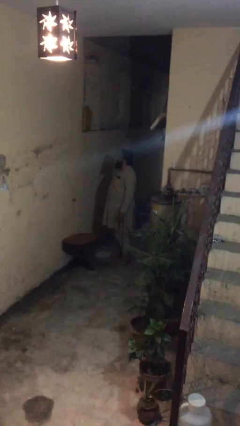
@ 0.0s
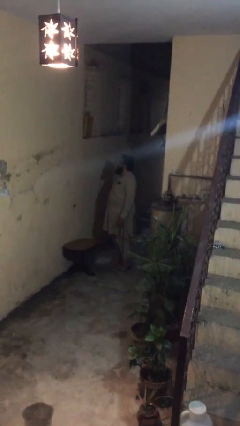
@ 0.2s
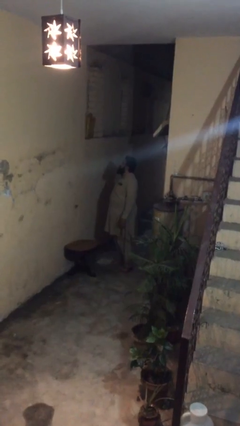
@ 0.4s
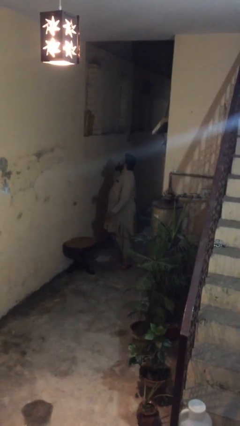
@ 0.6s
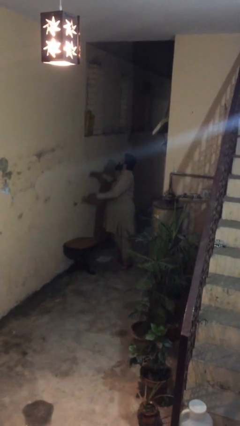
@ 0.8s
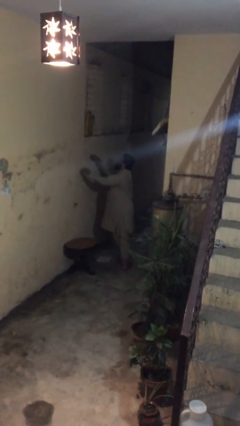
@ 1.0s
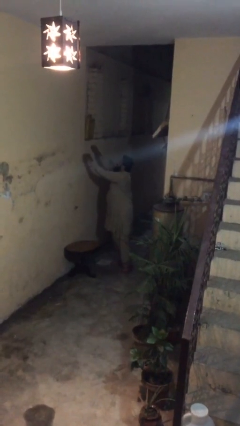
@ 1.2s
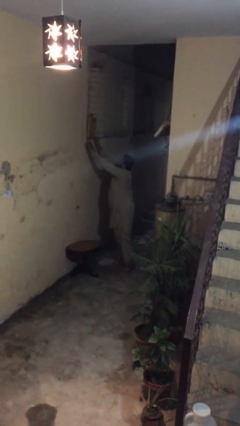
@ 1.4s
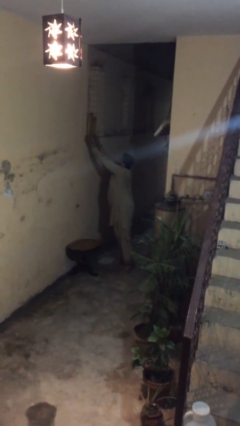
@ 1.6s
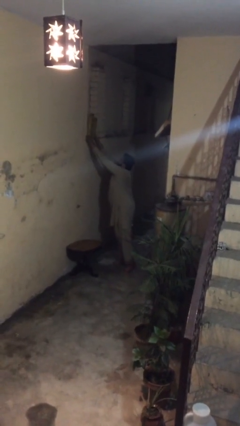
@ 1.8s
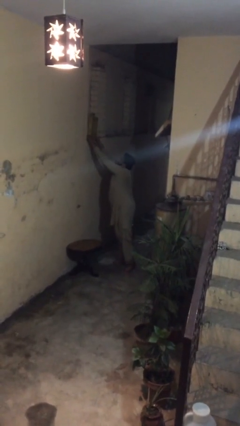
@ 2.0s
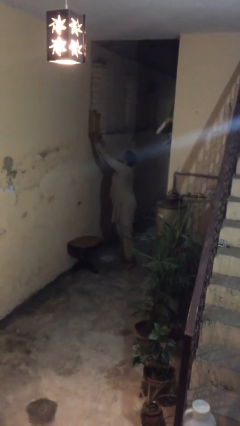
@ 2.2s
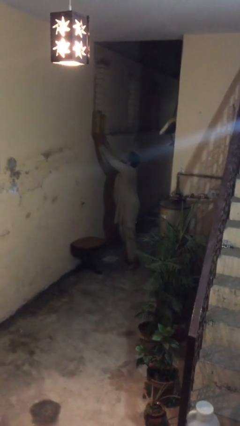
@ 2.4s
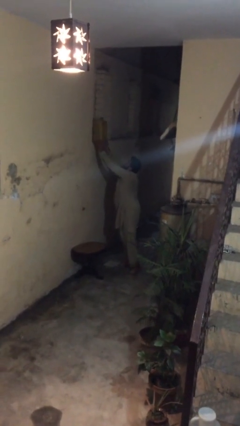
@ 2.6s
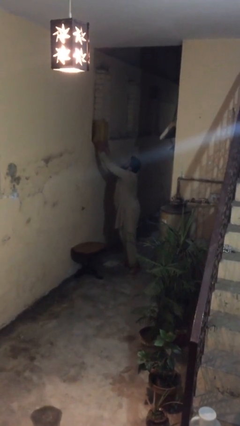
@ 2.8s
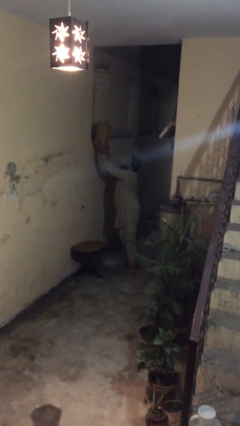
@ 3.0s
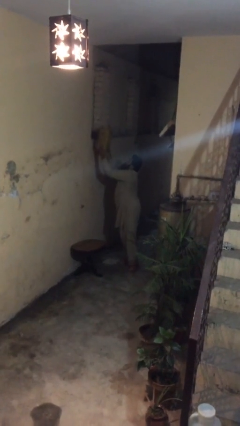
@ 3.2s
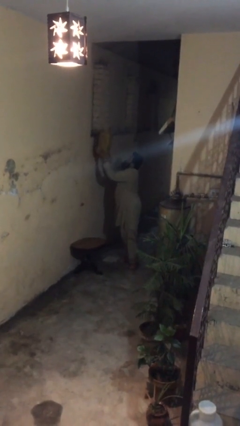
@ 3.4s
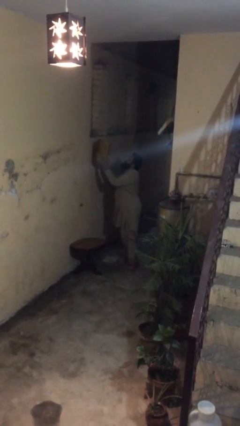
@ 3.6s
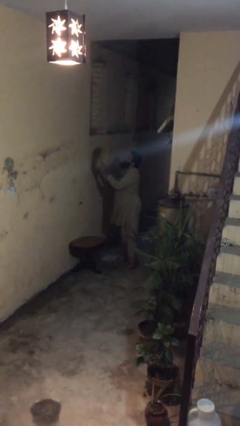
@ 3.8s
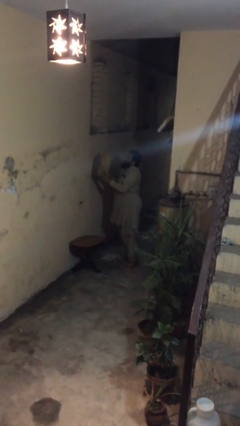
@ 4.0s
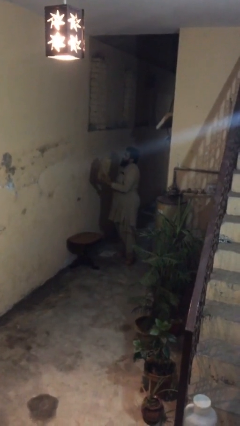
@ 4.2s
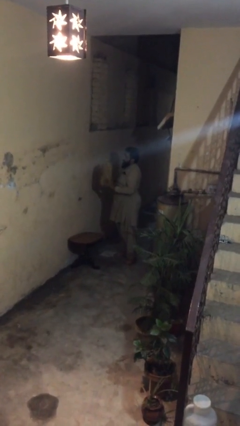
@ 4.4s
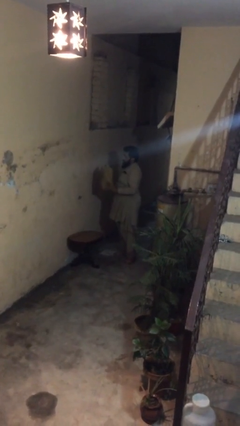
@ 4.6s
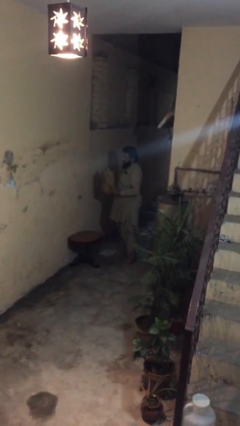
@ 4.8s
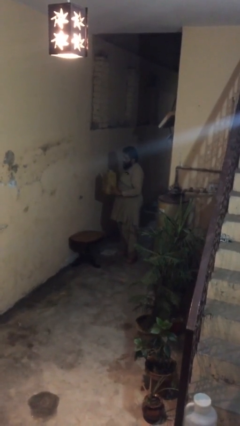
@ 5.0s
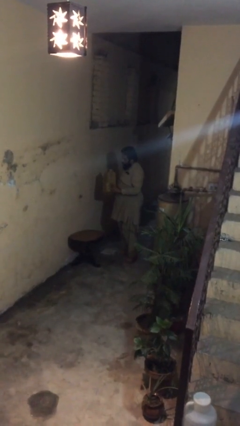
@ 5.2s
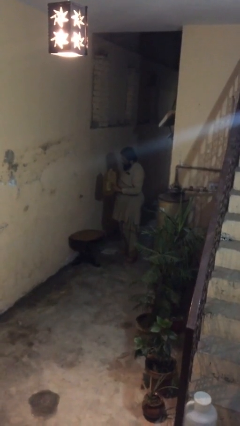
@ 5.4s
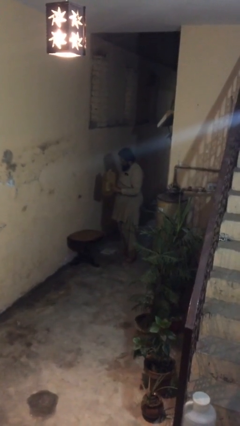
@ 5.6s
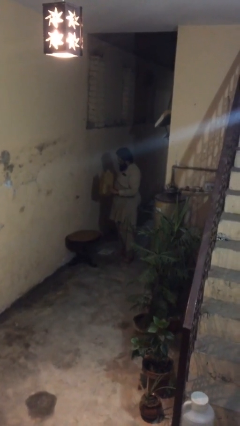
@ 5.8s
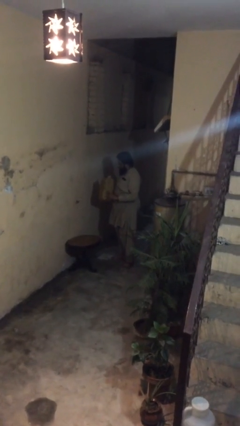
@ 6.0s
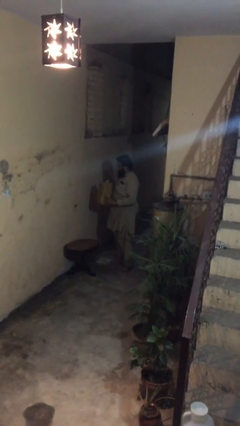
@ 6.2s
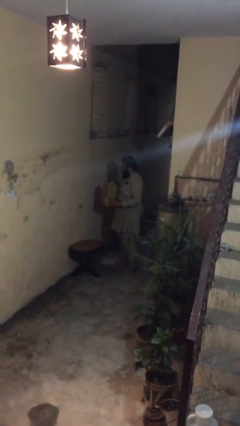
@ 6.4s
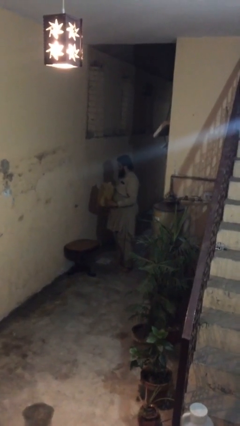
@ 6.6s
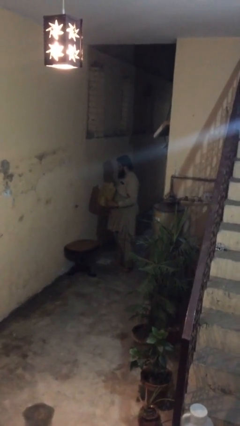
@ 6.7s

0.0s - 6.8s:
person picks up object from shelf

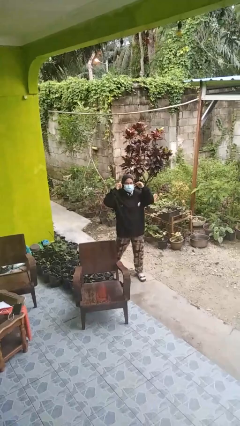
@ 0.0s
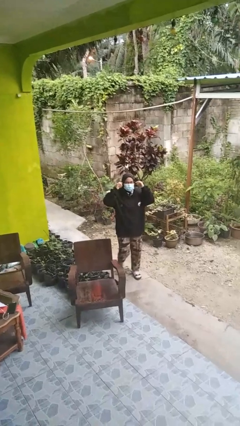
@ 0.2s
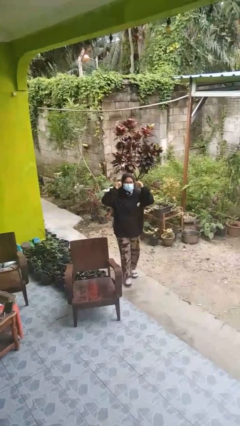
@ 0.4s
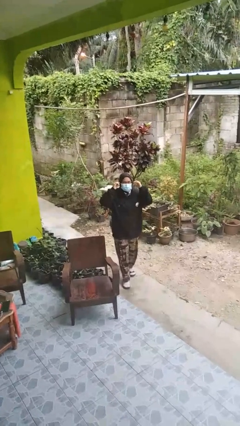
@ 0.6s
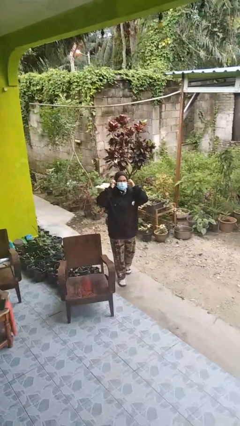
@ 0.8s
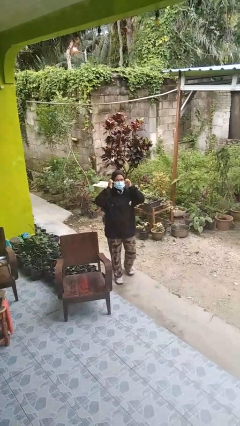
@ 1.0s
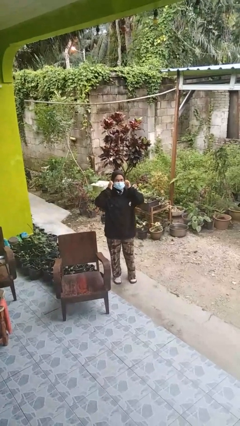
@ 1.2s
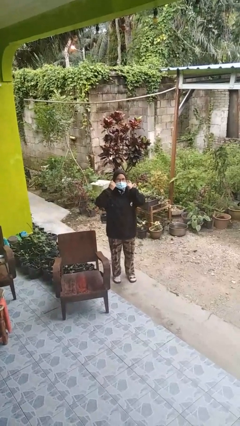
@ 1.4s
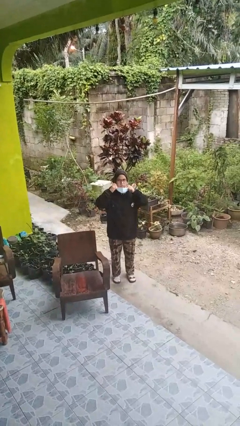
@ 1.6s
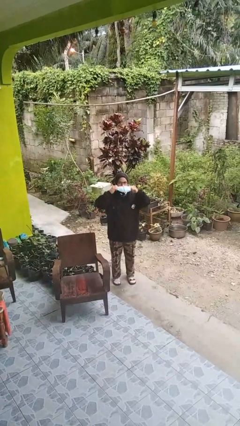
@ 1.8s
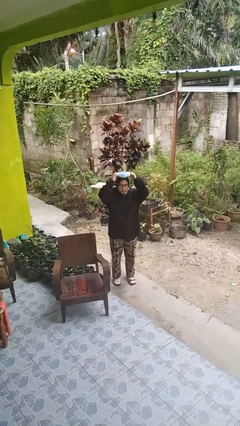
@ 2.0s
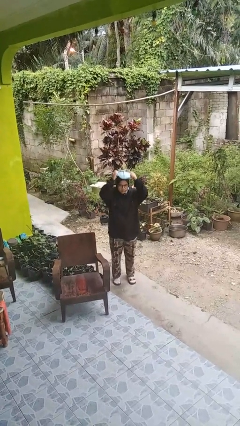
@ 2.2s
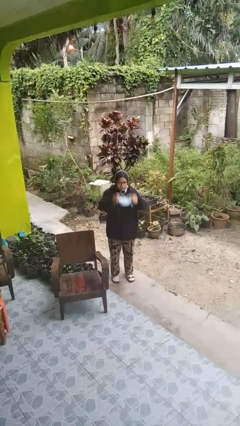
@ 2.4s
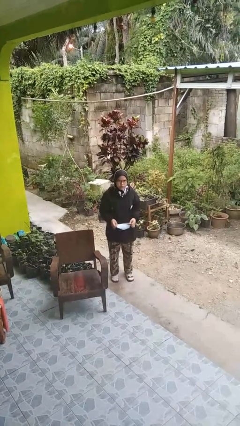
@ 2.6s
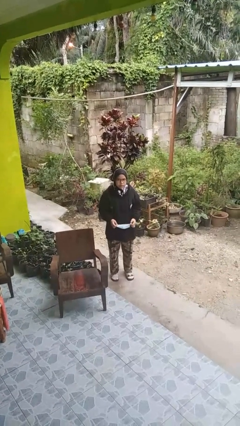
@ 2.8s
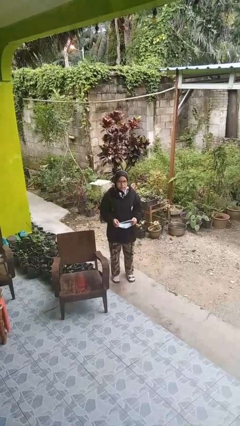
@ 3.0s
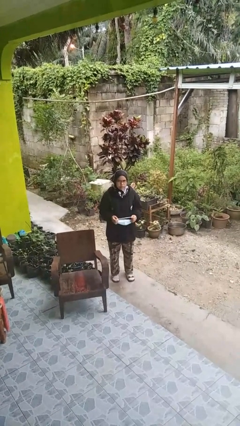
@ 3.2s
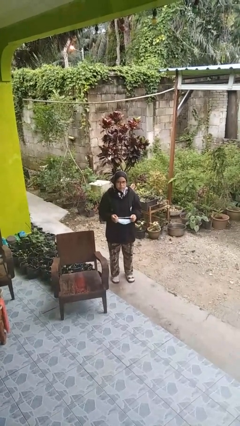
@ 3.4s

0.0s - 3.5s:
person takes off facemask

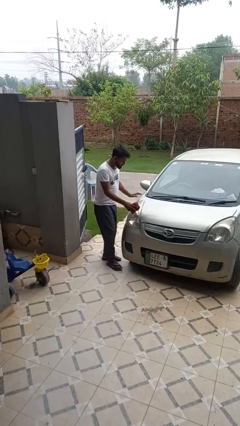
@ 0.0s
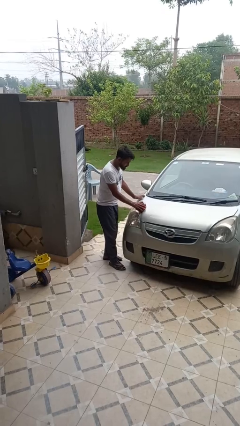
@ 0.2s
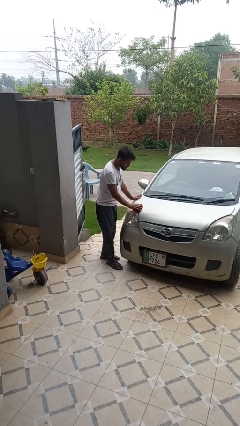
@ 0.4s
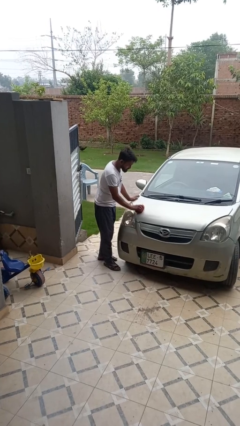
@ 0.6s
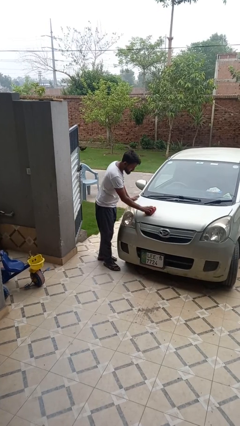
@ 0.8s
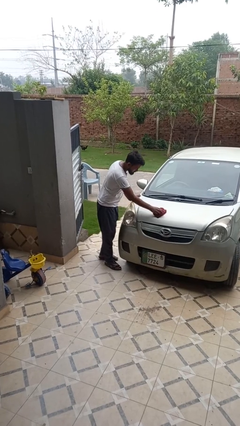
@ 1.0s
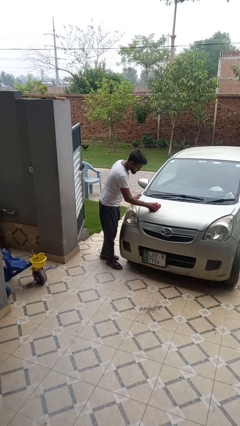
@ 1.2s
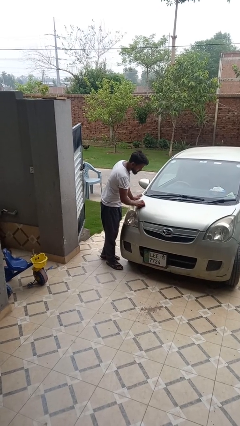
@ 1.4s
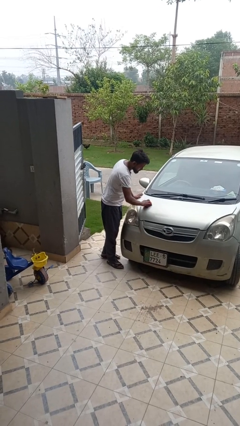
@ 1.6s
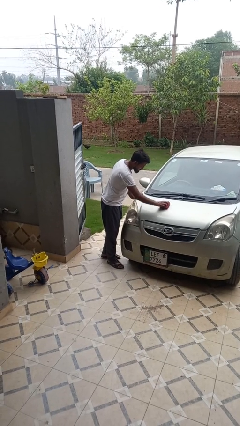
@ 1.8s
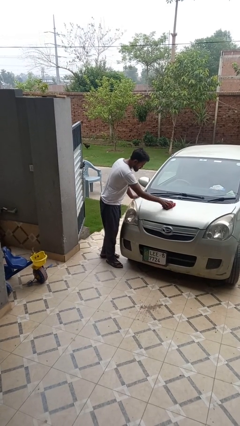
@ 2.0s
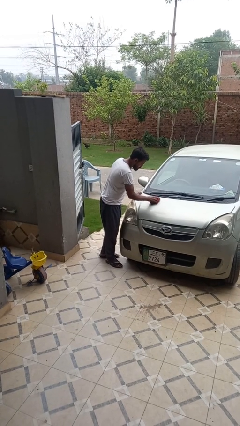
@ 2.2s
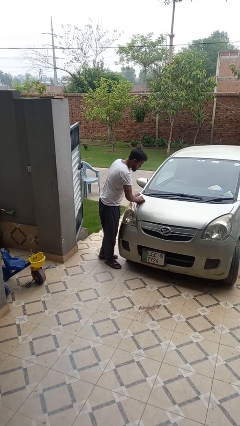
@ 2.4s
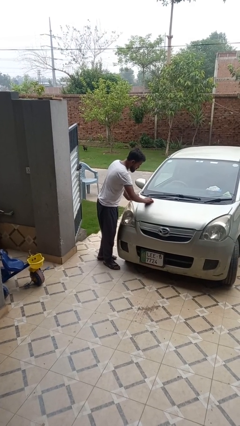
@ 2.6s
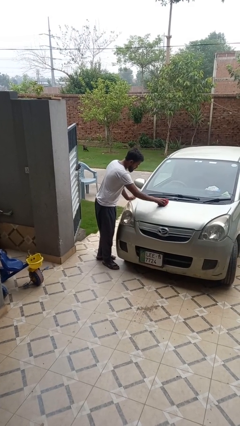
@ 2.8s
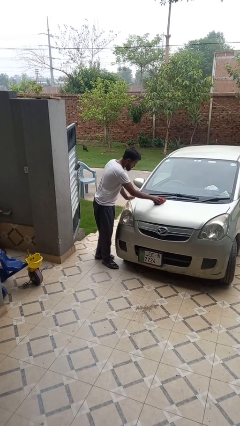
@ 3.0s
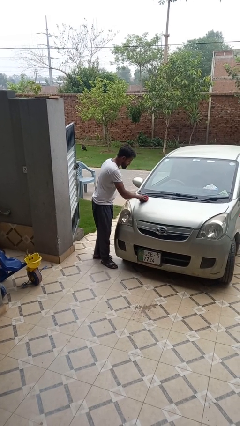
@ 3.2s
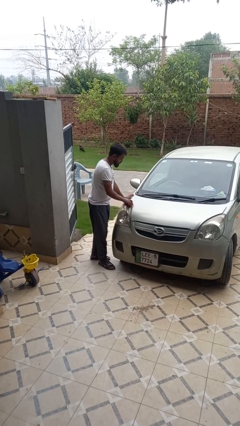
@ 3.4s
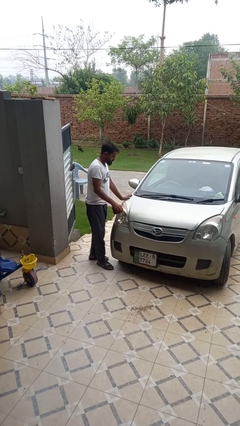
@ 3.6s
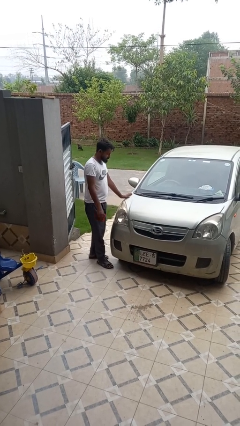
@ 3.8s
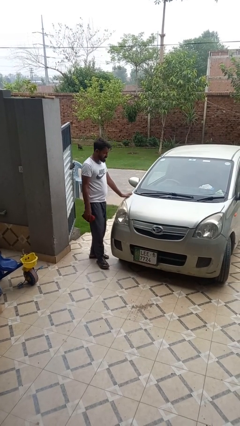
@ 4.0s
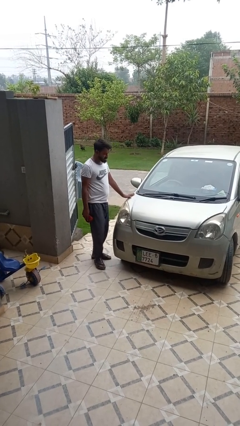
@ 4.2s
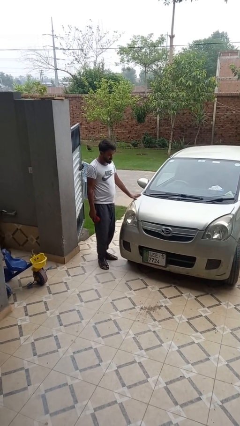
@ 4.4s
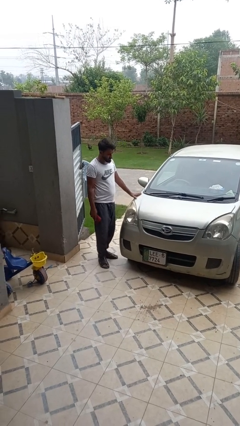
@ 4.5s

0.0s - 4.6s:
person polishes car with rag

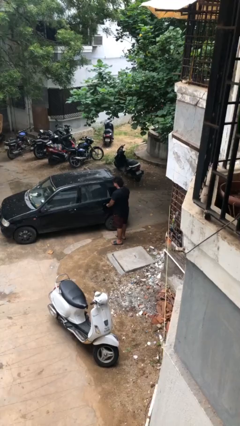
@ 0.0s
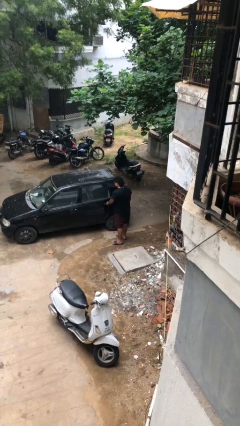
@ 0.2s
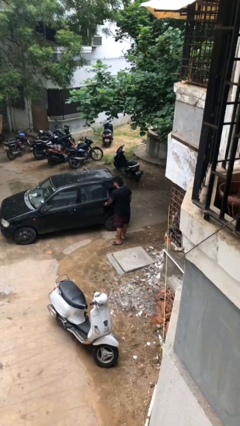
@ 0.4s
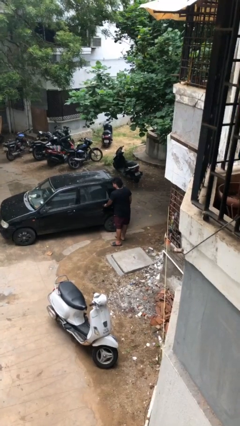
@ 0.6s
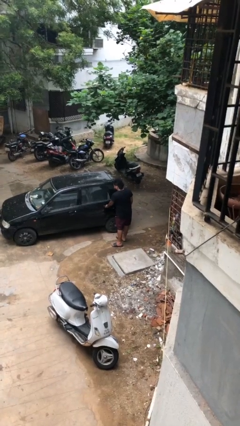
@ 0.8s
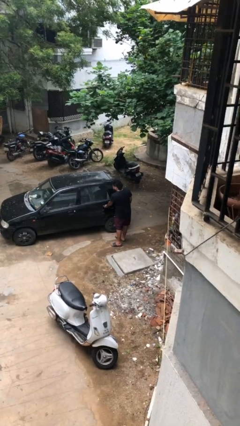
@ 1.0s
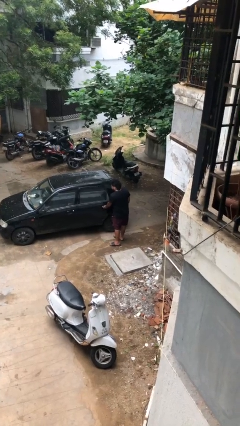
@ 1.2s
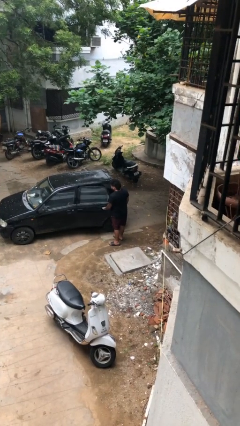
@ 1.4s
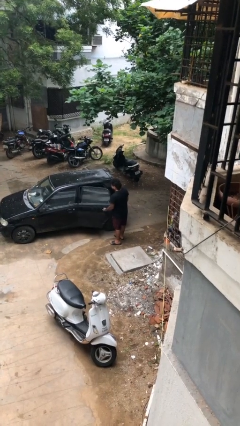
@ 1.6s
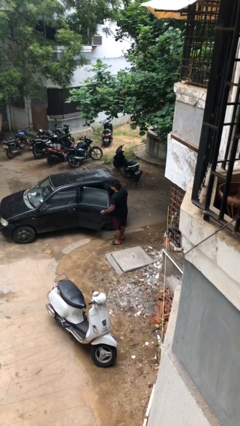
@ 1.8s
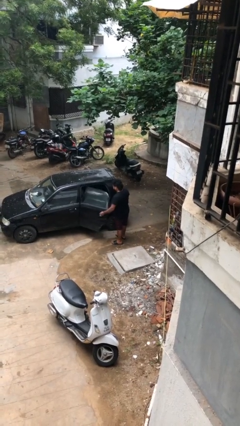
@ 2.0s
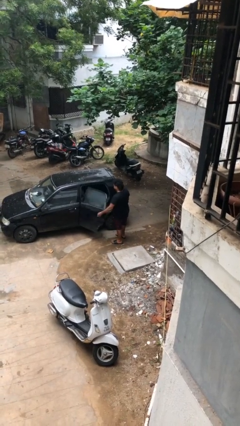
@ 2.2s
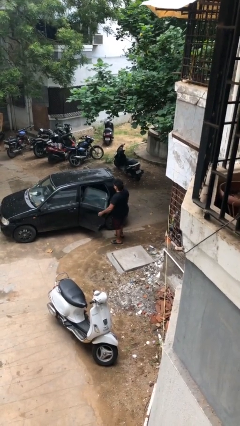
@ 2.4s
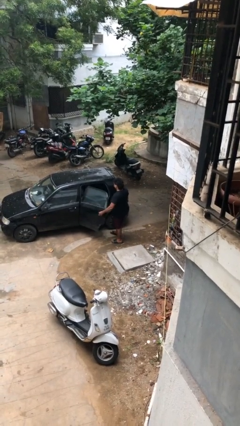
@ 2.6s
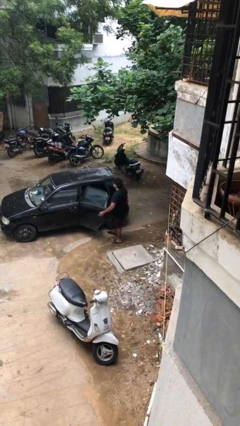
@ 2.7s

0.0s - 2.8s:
person opens car door

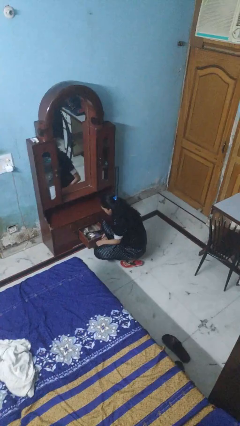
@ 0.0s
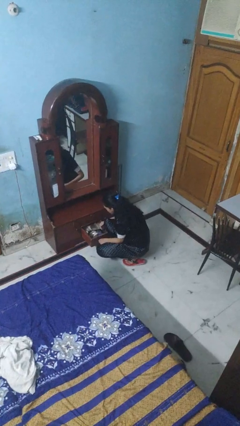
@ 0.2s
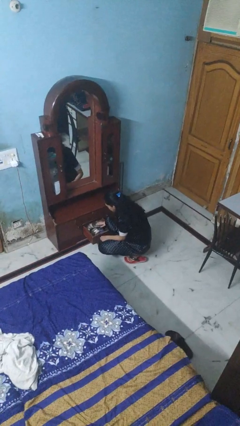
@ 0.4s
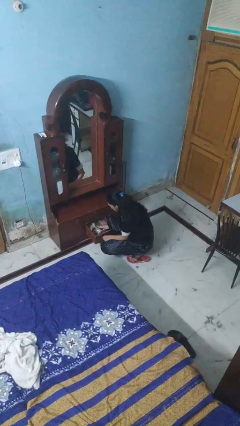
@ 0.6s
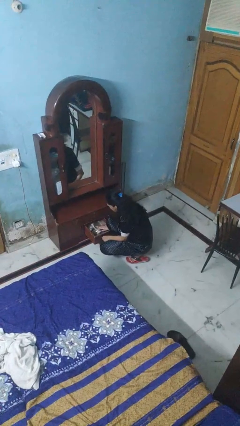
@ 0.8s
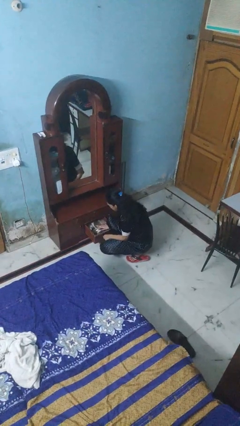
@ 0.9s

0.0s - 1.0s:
person opens dresser drawer
